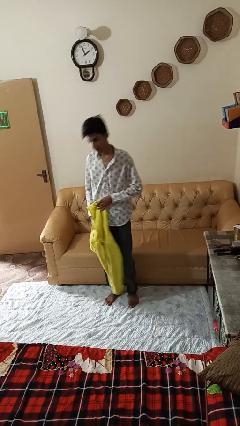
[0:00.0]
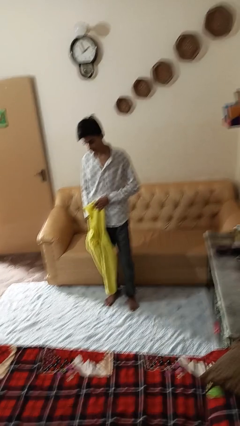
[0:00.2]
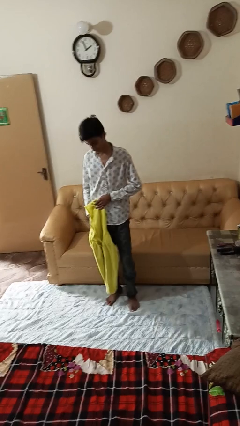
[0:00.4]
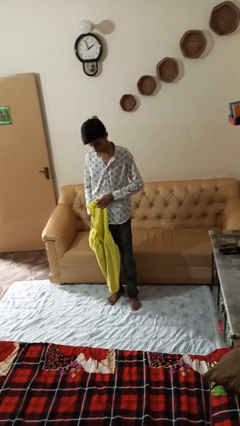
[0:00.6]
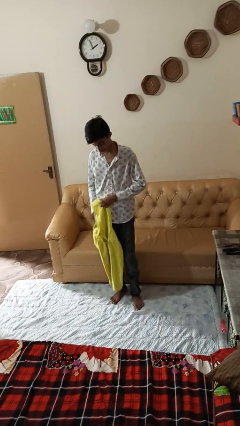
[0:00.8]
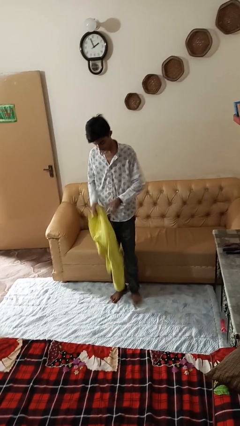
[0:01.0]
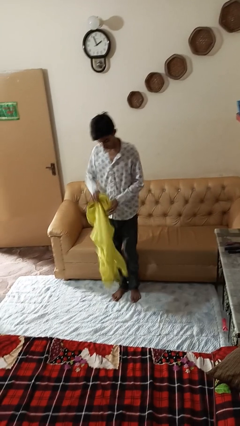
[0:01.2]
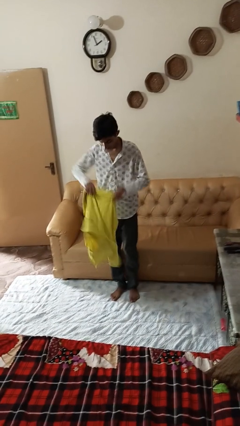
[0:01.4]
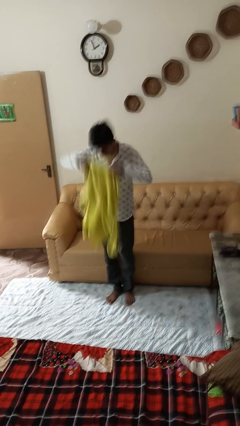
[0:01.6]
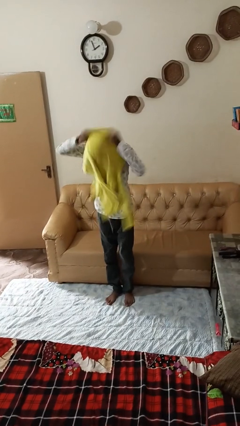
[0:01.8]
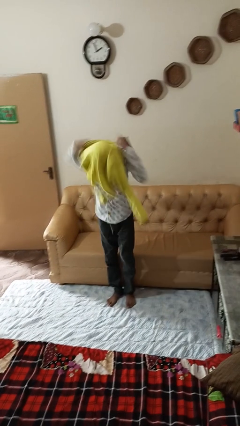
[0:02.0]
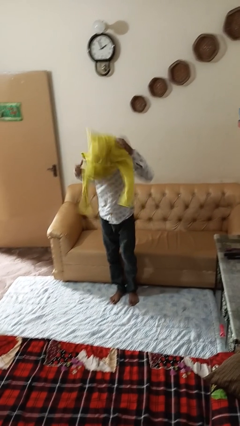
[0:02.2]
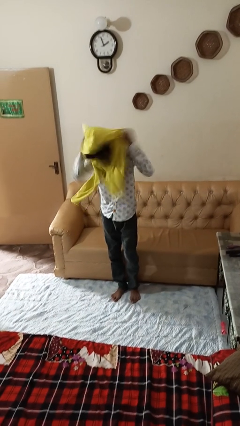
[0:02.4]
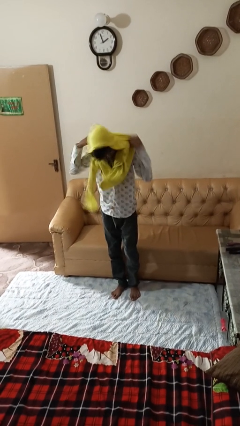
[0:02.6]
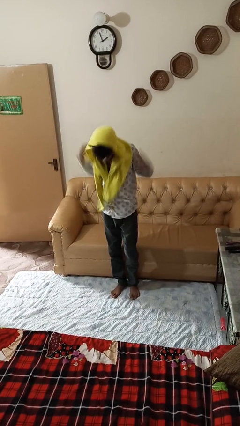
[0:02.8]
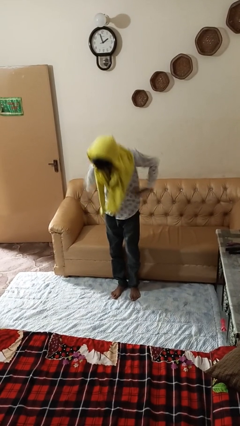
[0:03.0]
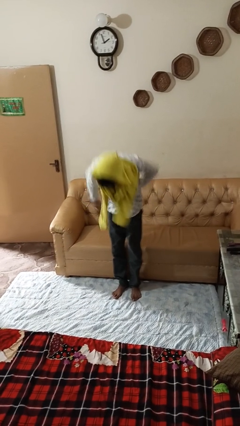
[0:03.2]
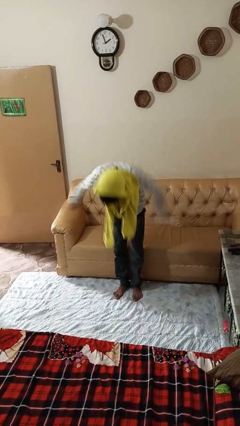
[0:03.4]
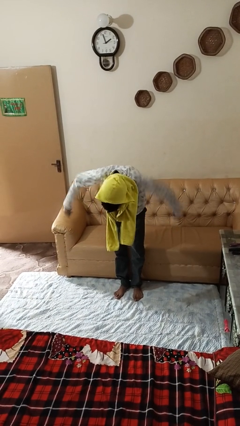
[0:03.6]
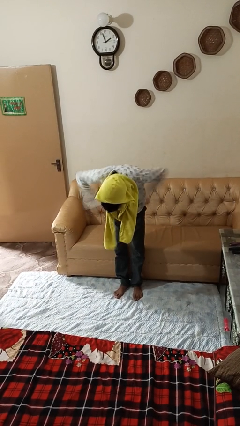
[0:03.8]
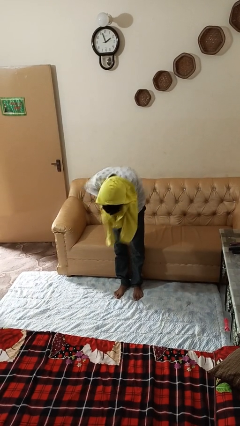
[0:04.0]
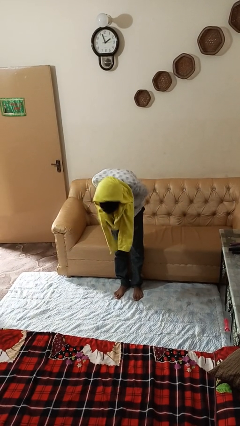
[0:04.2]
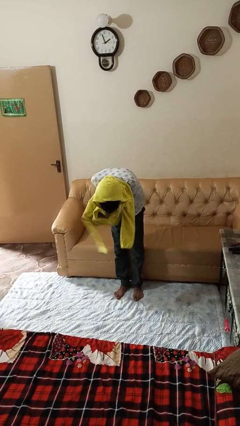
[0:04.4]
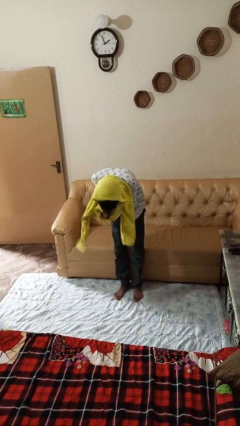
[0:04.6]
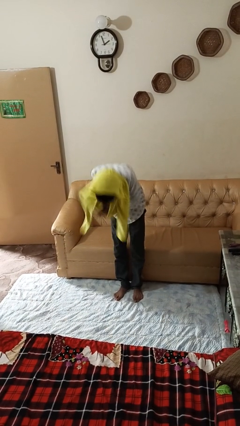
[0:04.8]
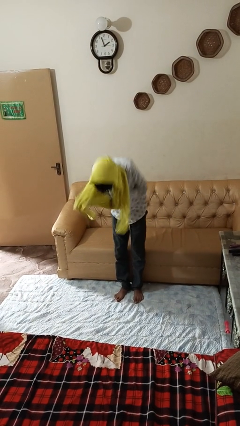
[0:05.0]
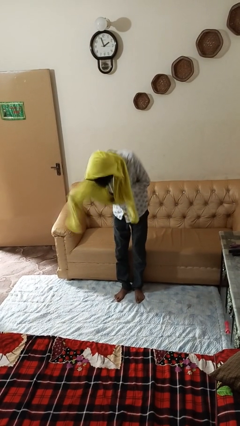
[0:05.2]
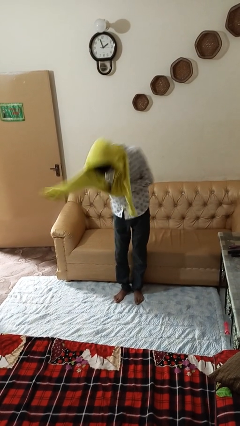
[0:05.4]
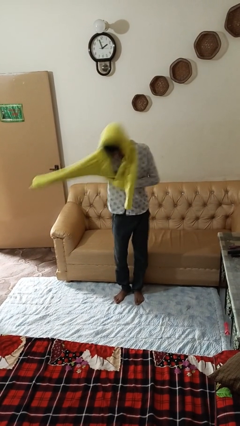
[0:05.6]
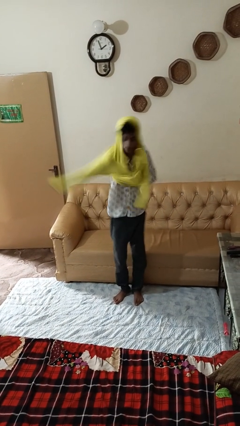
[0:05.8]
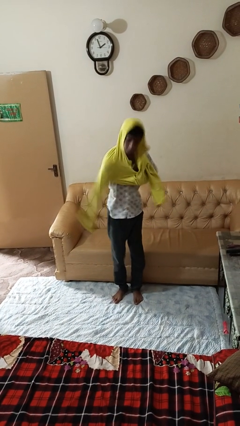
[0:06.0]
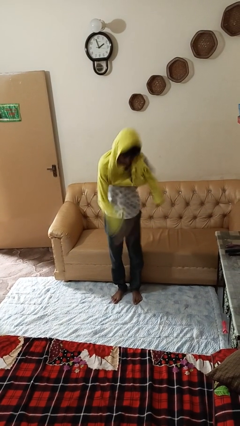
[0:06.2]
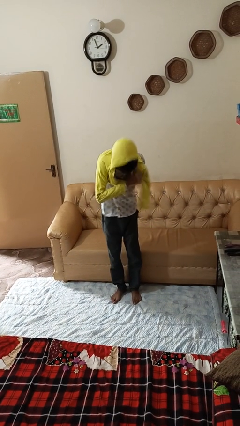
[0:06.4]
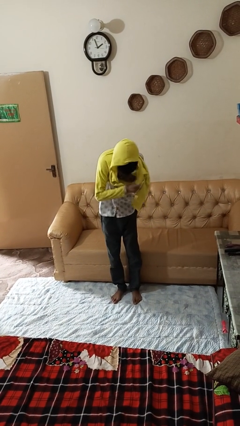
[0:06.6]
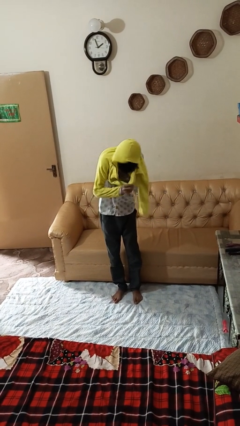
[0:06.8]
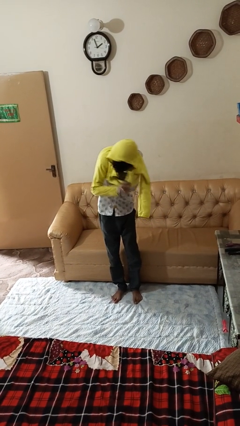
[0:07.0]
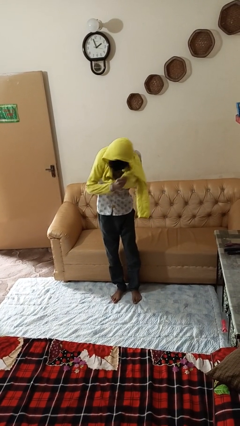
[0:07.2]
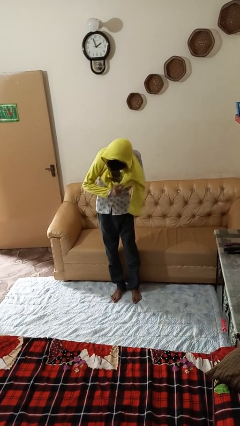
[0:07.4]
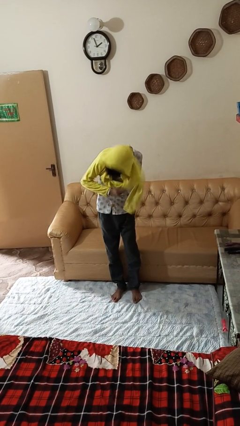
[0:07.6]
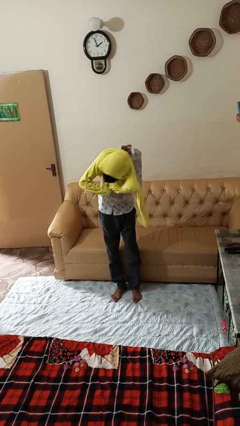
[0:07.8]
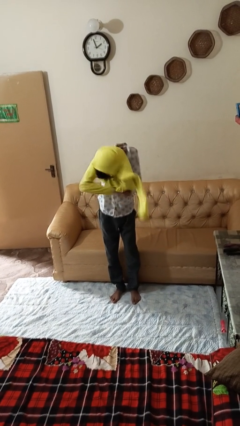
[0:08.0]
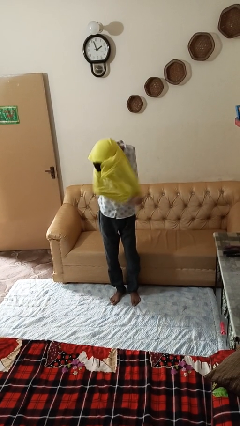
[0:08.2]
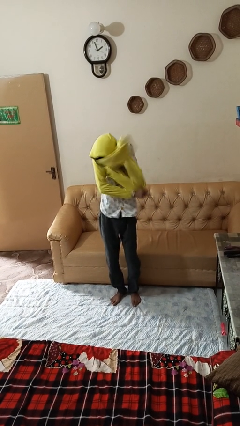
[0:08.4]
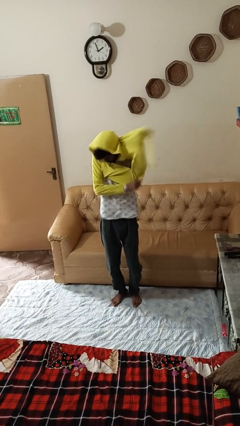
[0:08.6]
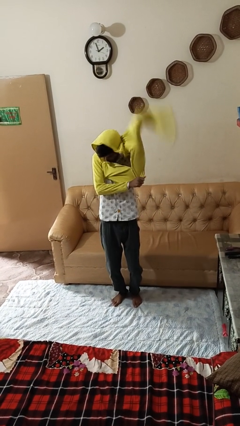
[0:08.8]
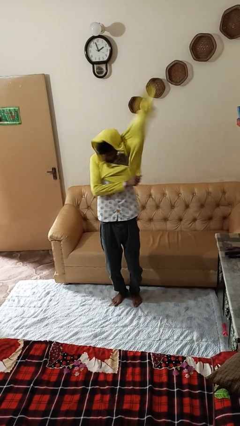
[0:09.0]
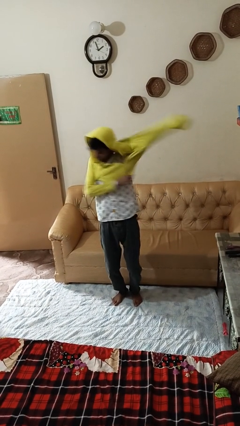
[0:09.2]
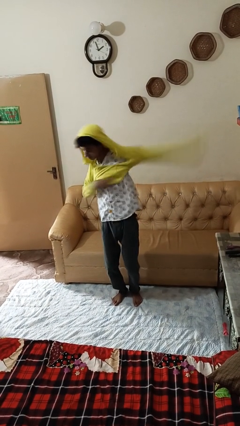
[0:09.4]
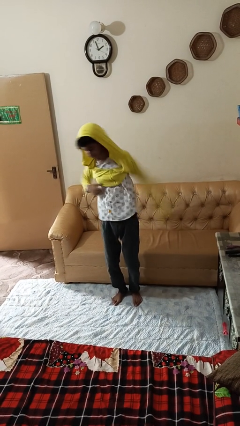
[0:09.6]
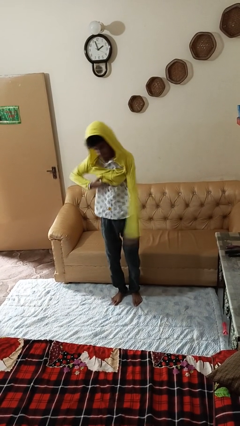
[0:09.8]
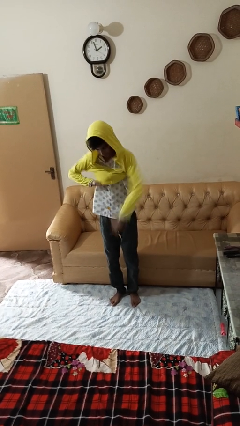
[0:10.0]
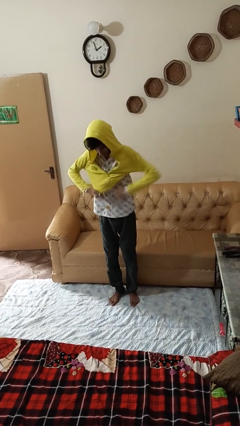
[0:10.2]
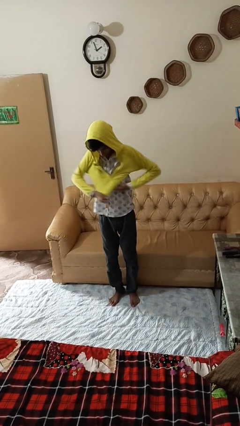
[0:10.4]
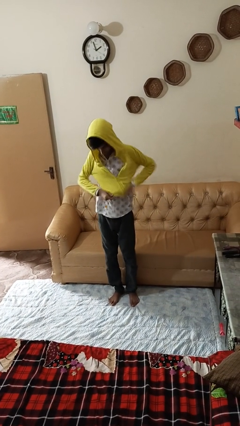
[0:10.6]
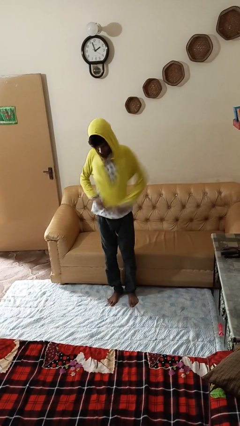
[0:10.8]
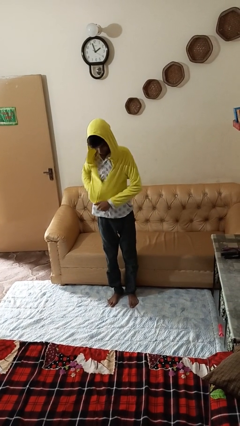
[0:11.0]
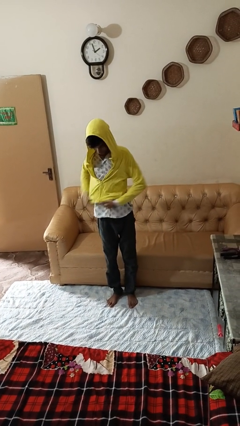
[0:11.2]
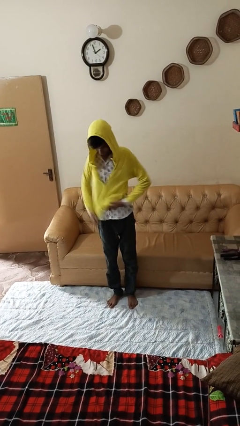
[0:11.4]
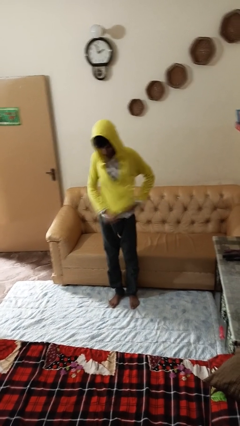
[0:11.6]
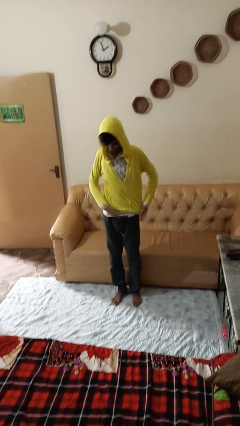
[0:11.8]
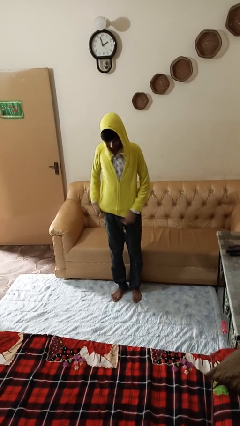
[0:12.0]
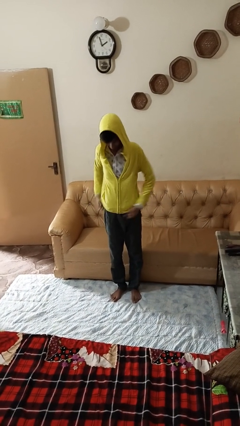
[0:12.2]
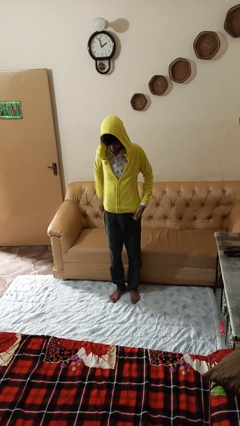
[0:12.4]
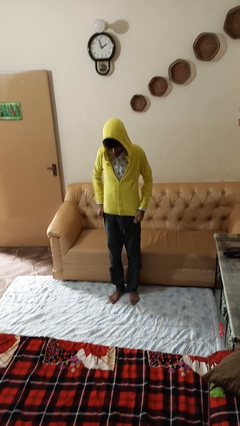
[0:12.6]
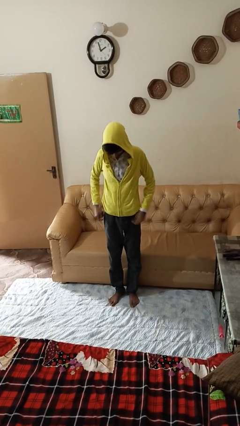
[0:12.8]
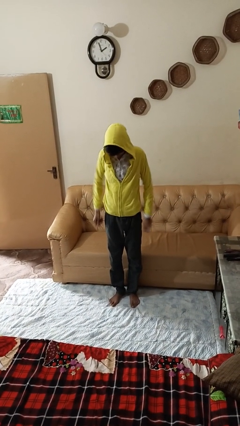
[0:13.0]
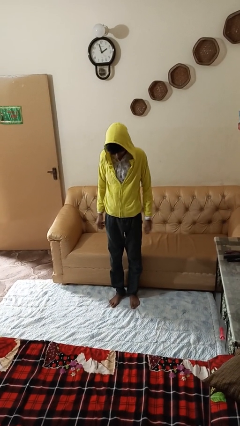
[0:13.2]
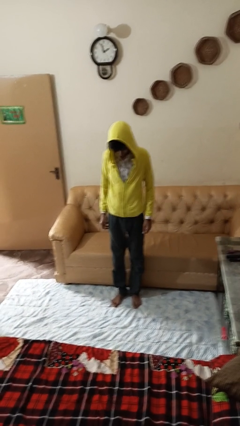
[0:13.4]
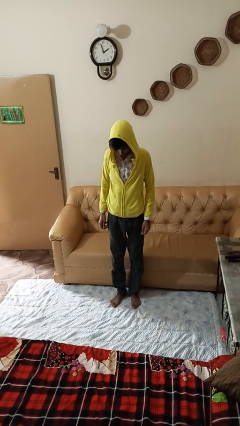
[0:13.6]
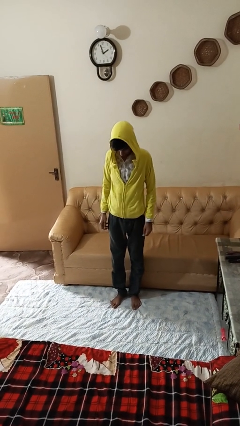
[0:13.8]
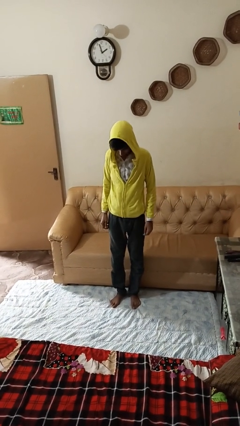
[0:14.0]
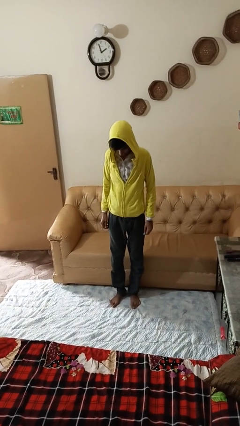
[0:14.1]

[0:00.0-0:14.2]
person puts on hoodie

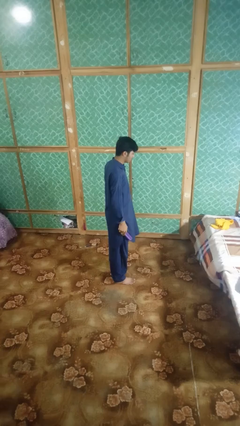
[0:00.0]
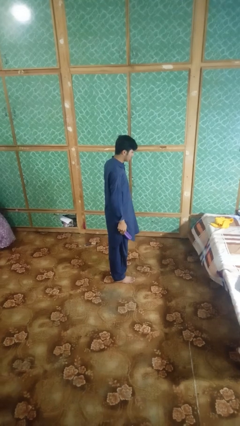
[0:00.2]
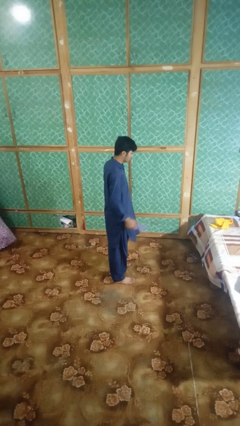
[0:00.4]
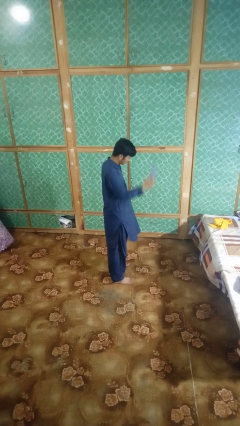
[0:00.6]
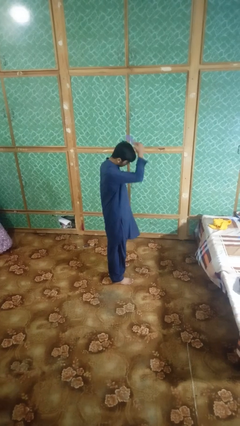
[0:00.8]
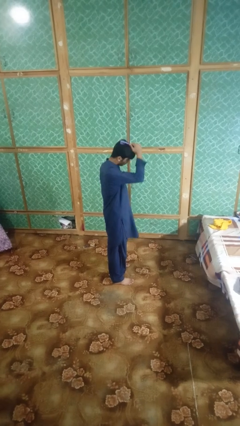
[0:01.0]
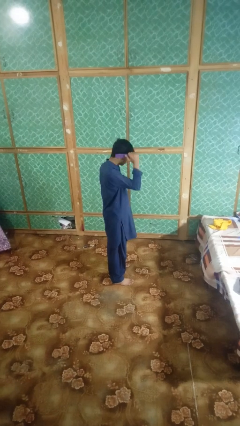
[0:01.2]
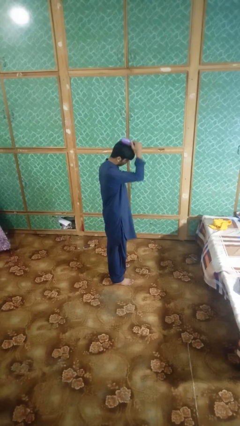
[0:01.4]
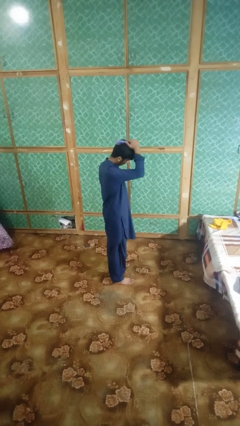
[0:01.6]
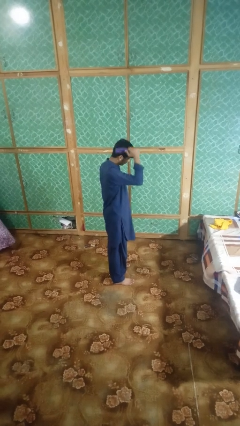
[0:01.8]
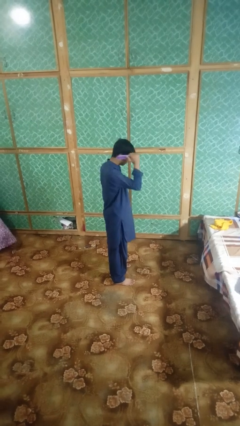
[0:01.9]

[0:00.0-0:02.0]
person brushes hair

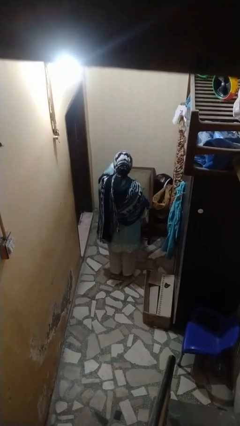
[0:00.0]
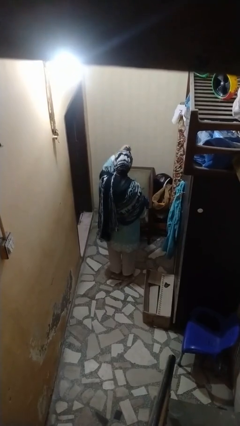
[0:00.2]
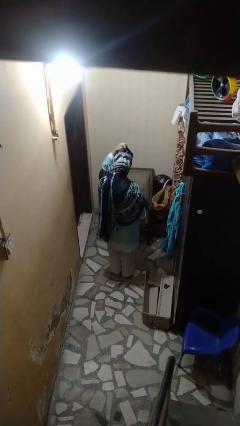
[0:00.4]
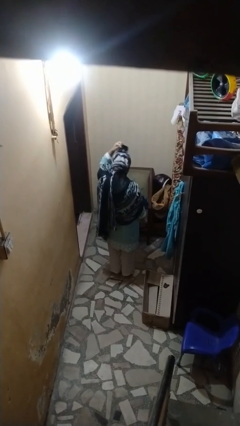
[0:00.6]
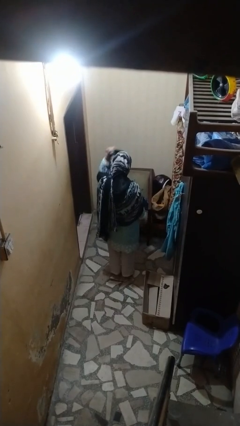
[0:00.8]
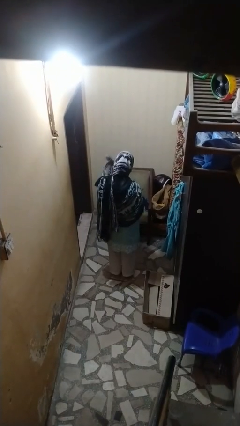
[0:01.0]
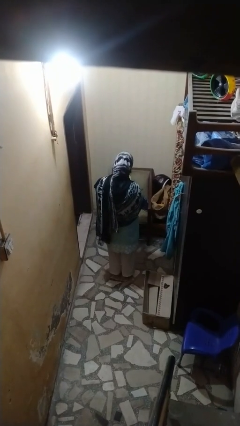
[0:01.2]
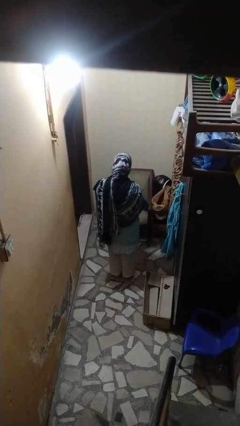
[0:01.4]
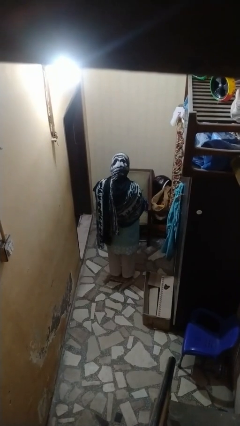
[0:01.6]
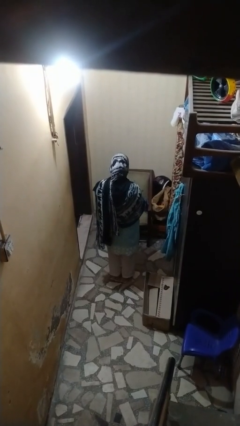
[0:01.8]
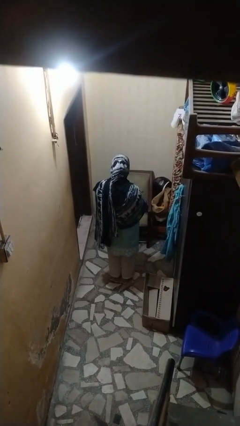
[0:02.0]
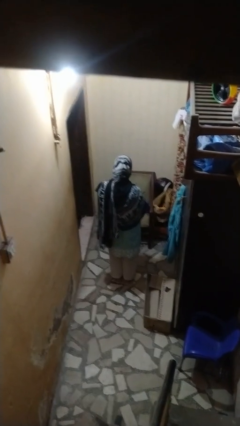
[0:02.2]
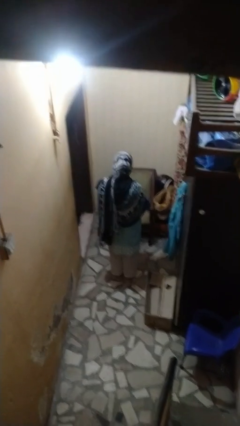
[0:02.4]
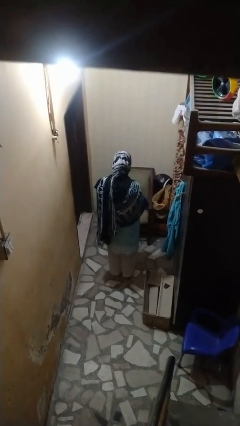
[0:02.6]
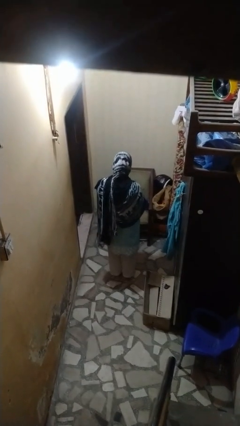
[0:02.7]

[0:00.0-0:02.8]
person takes off necktie
